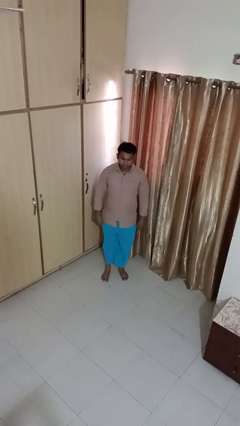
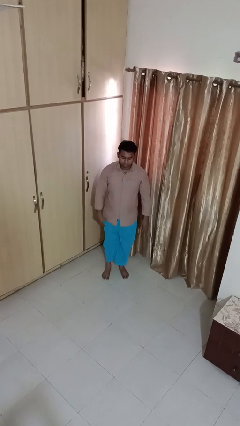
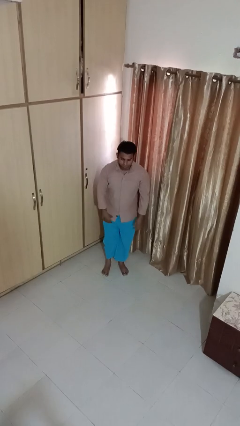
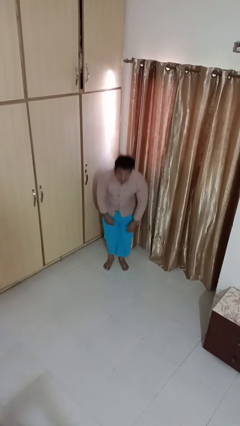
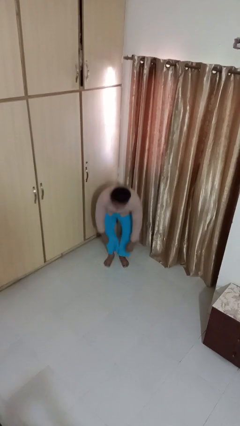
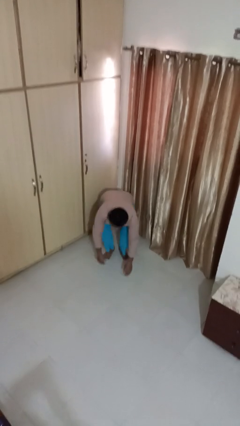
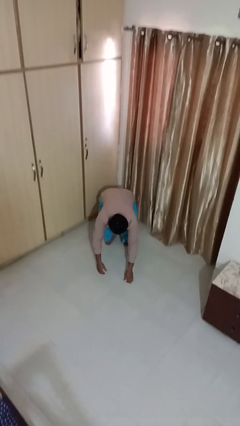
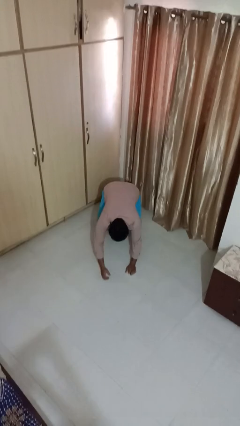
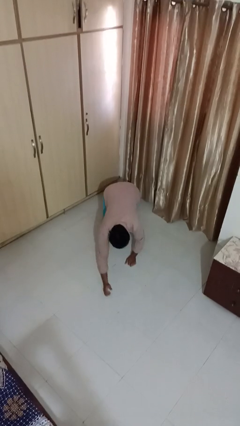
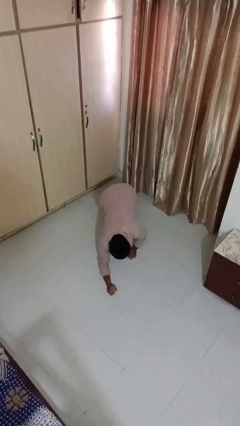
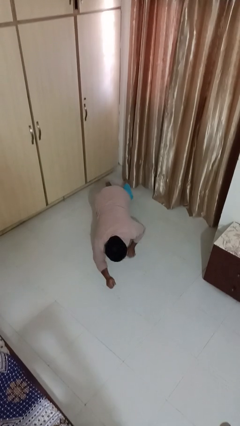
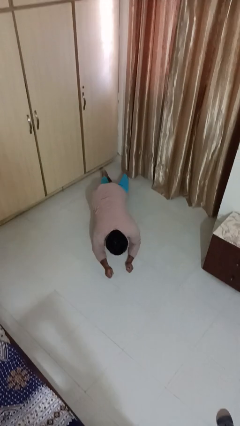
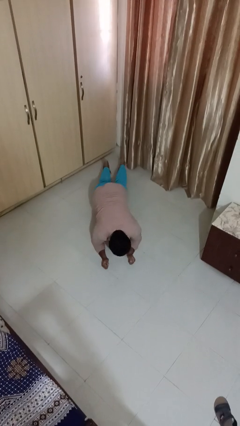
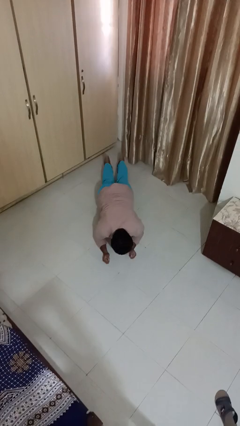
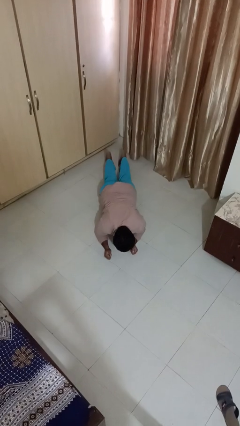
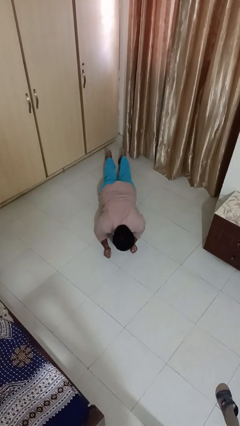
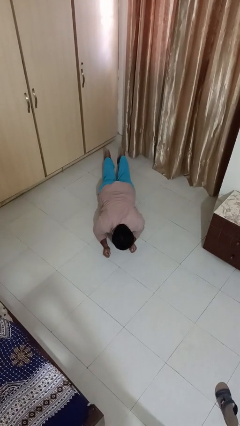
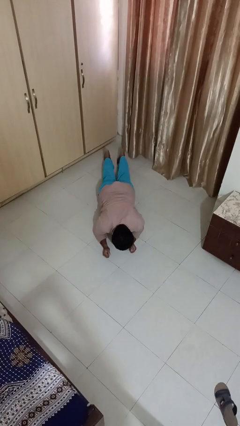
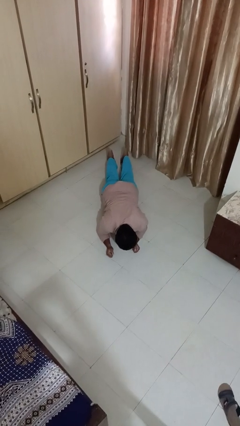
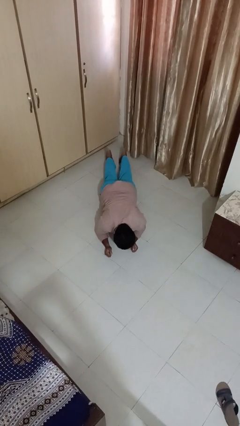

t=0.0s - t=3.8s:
person exercises with plank

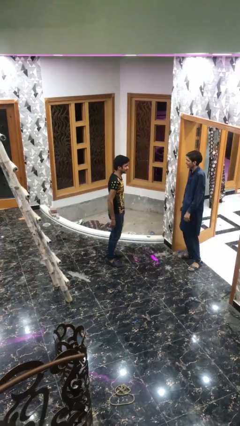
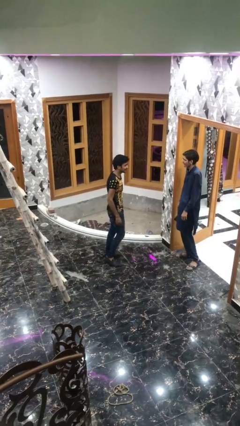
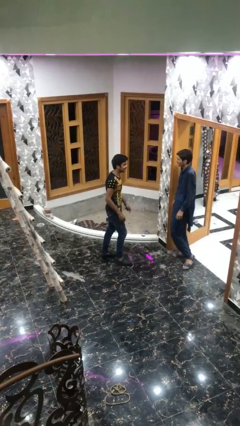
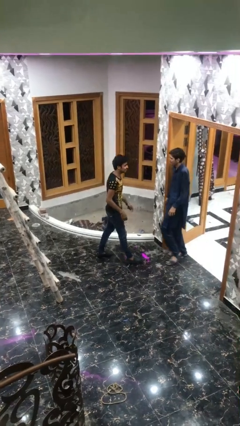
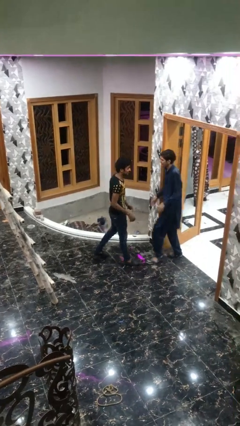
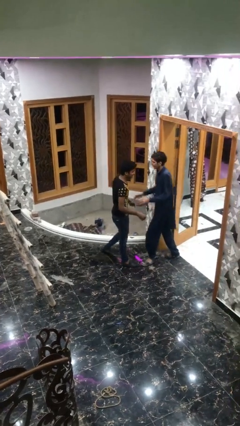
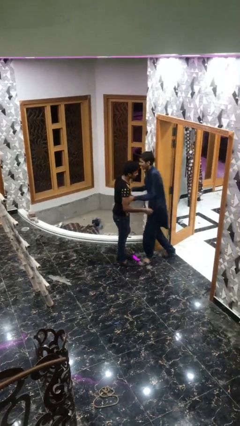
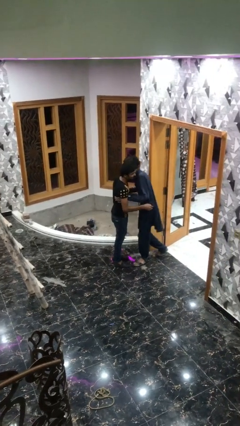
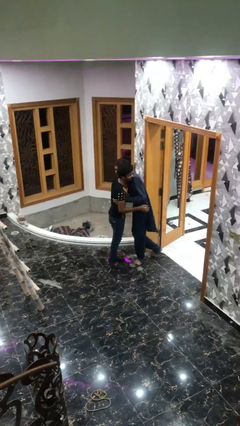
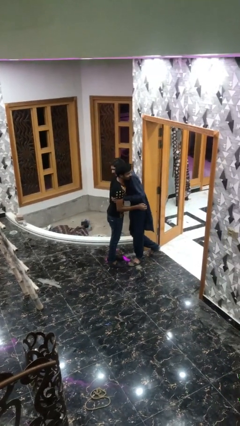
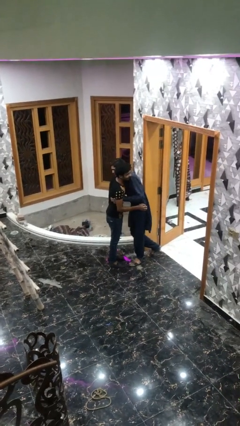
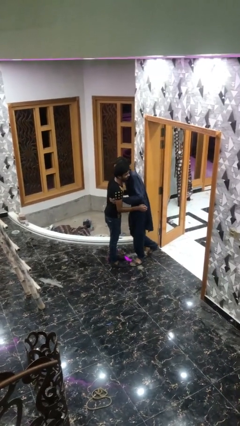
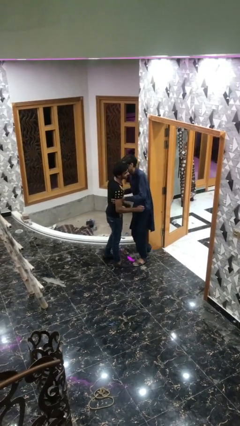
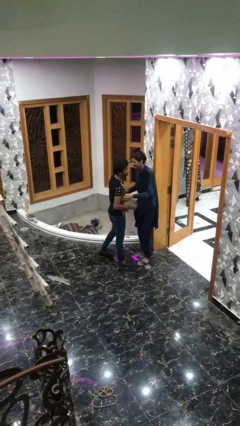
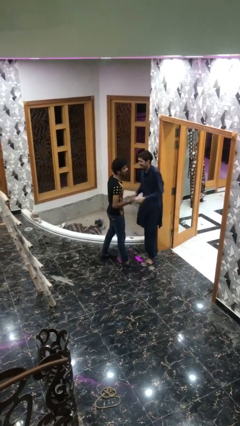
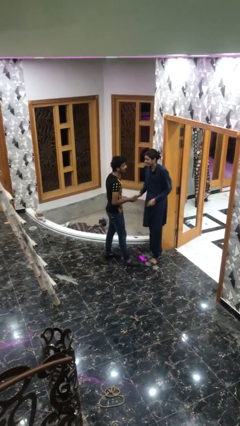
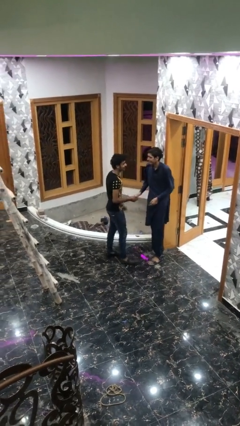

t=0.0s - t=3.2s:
person embraces person

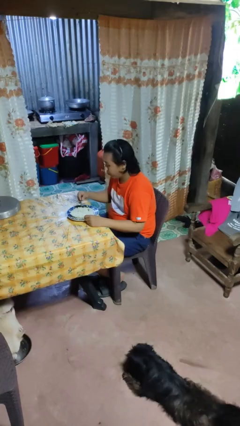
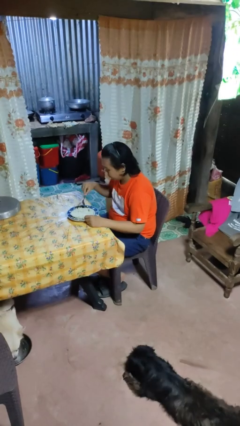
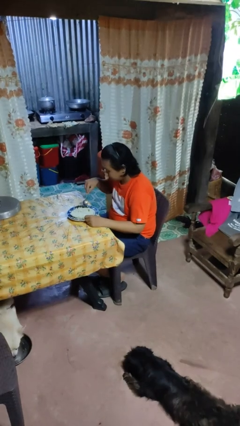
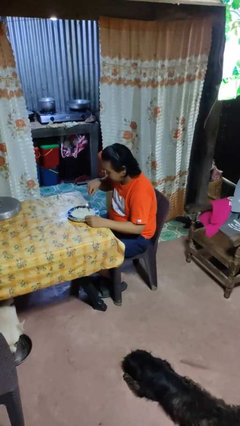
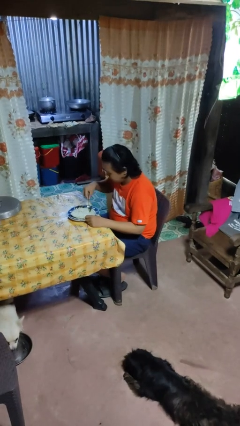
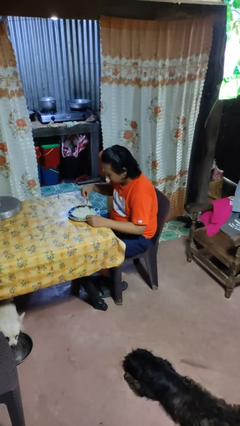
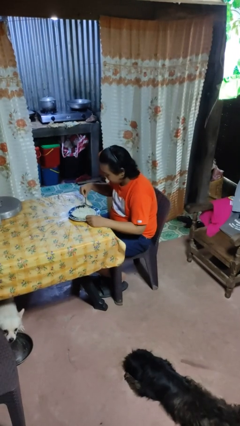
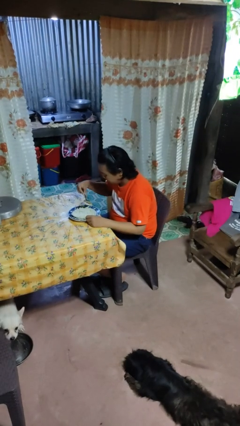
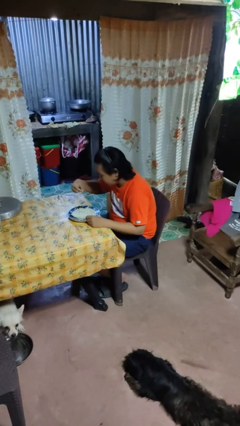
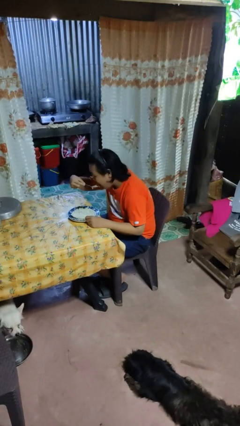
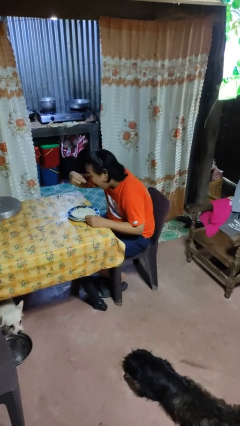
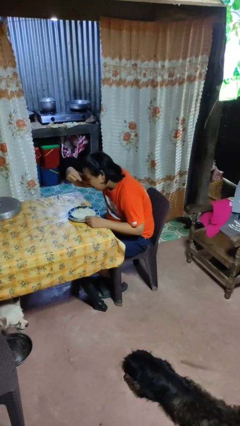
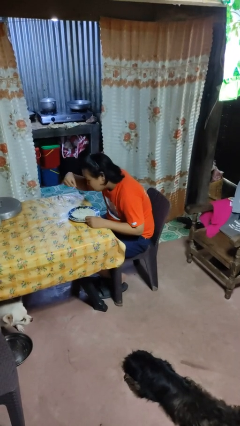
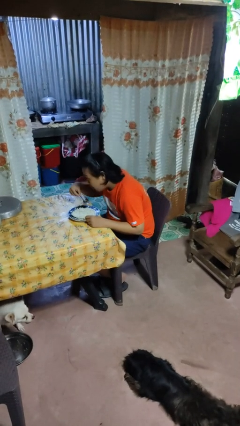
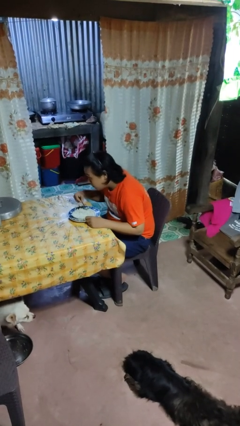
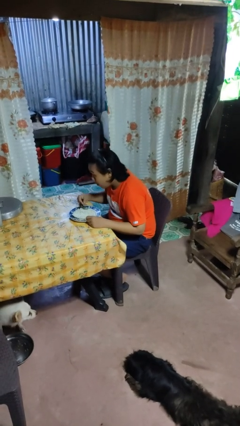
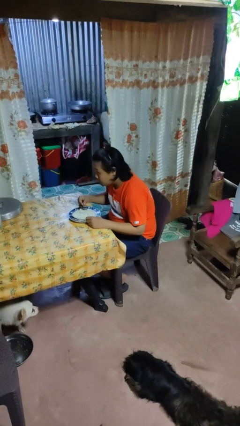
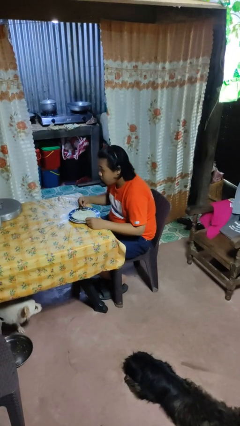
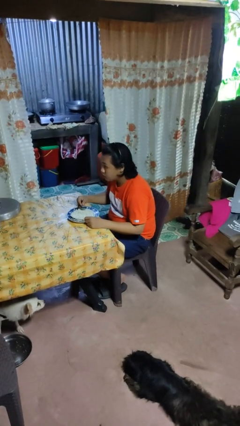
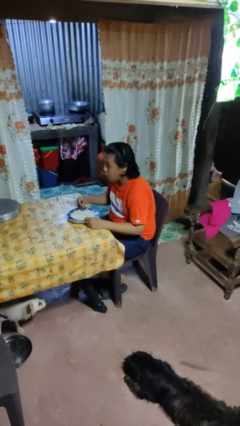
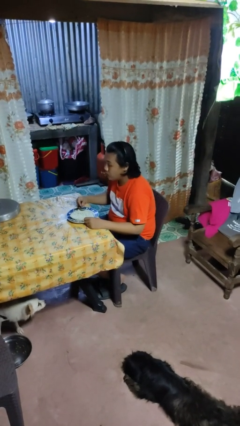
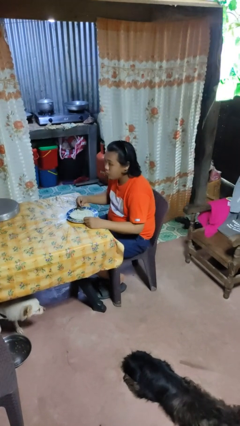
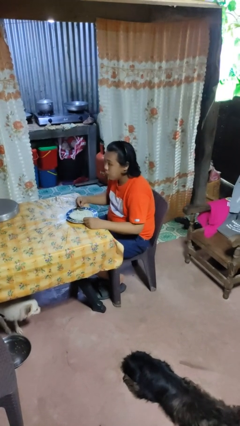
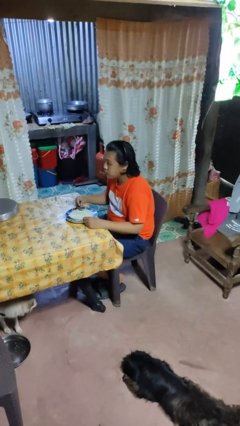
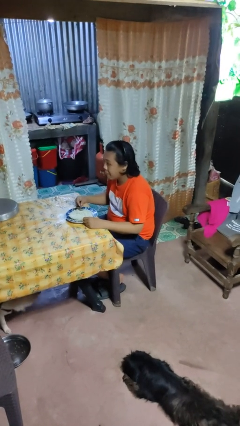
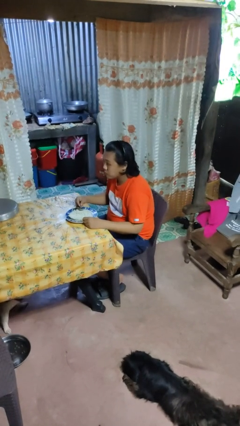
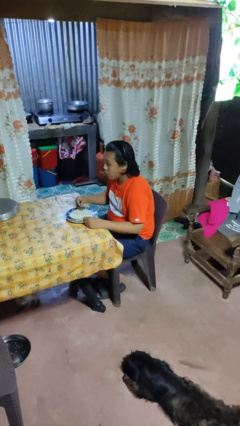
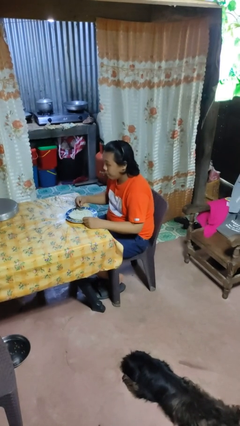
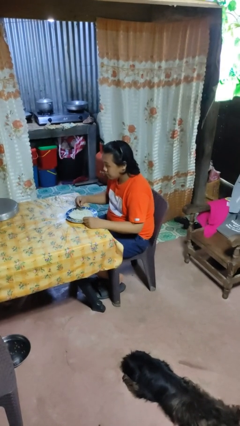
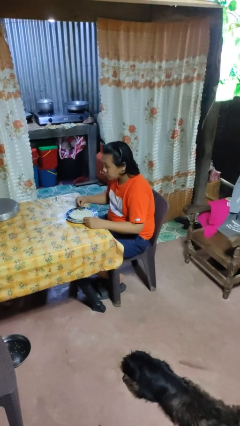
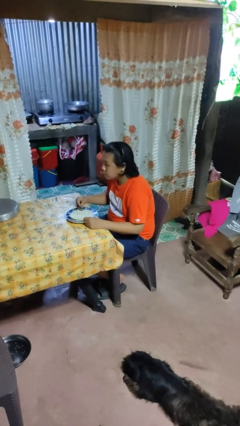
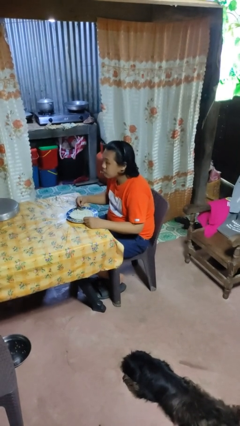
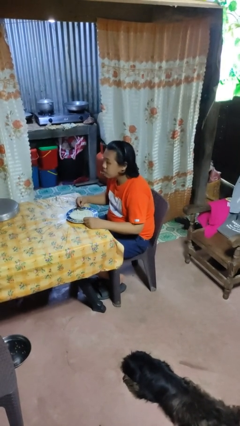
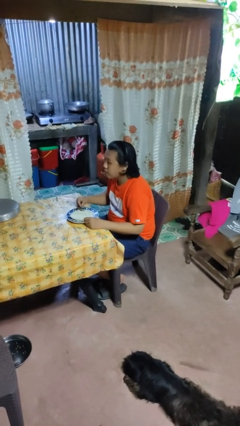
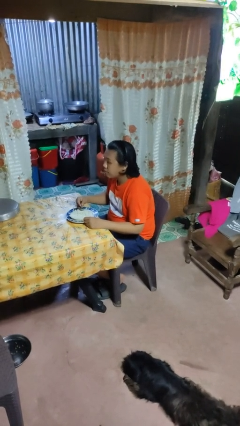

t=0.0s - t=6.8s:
person eats with utensil

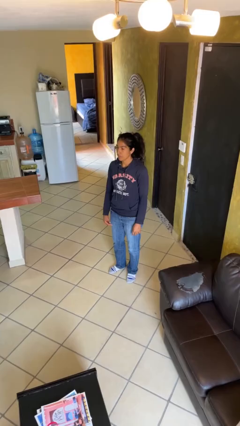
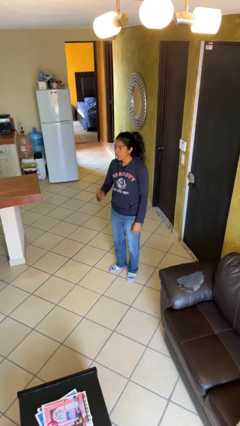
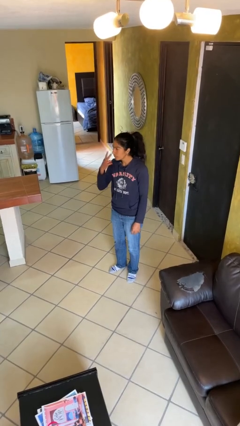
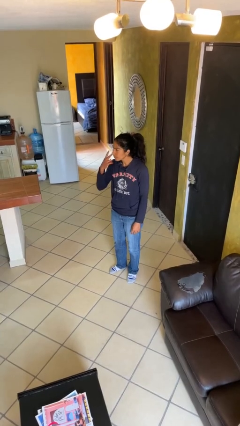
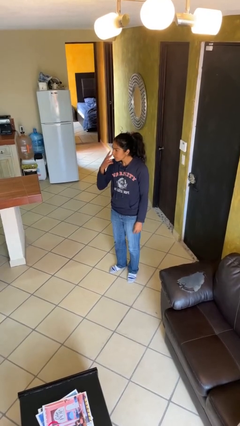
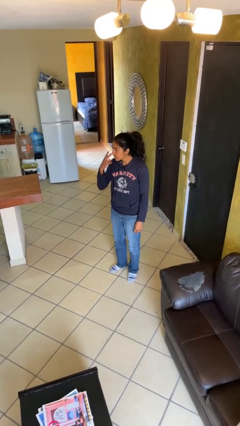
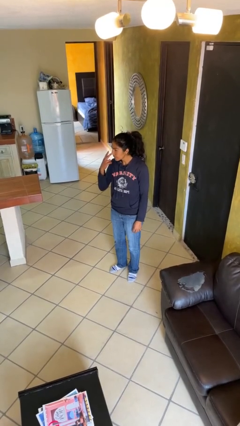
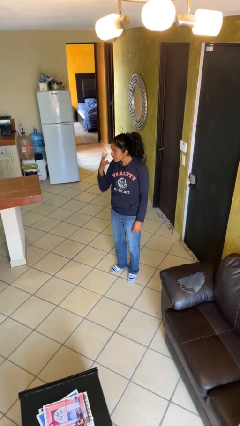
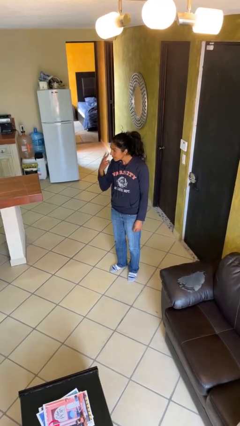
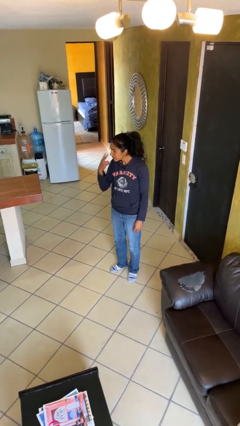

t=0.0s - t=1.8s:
person gestures watch closely

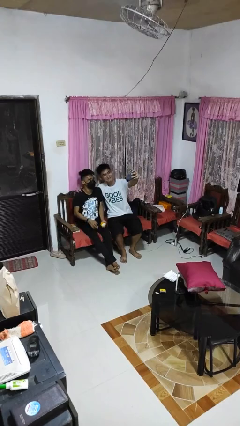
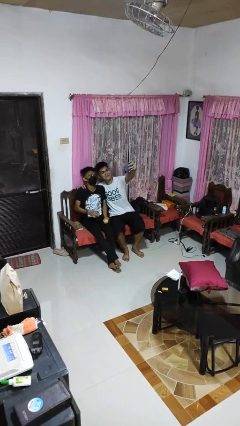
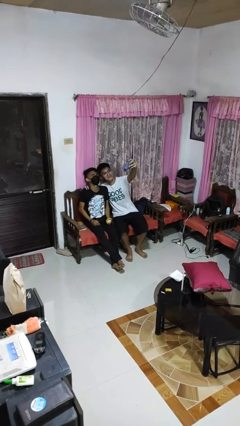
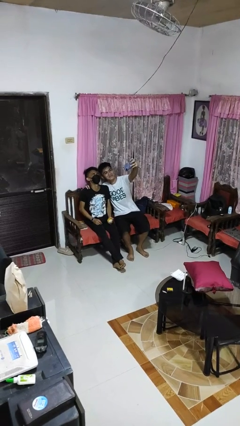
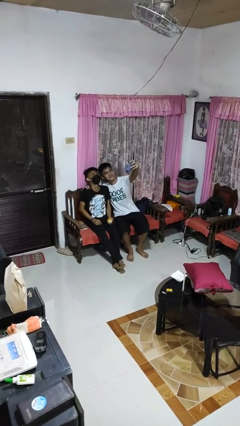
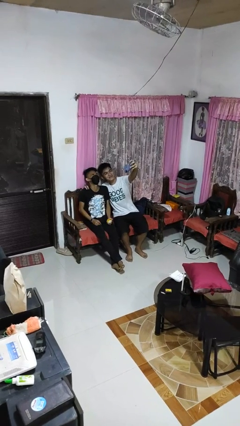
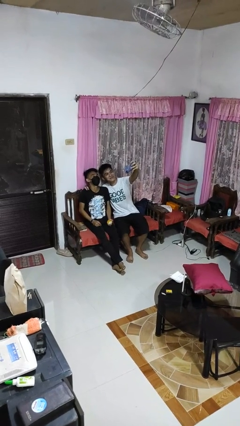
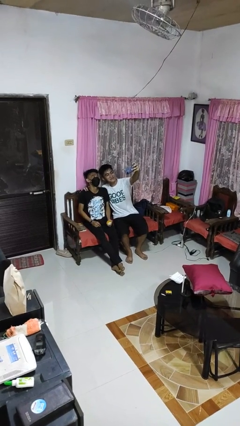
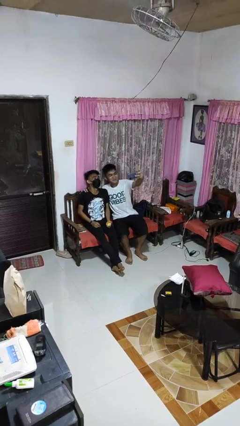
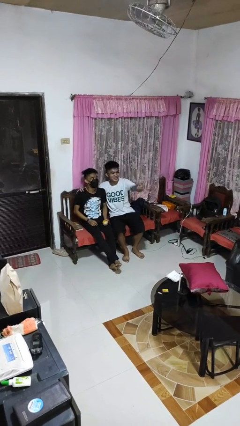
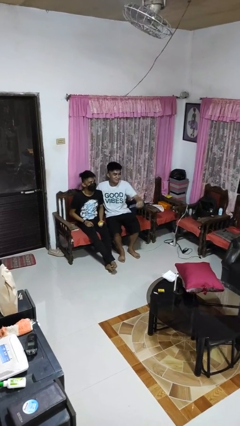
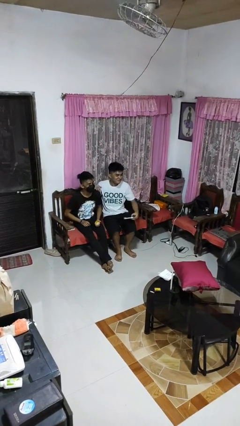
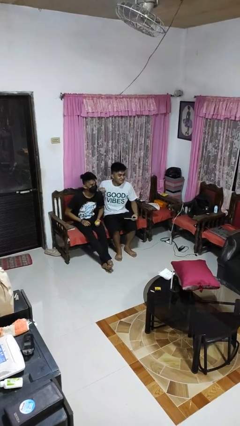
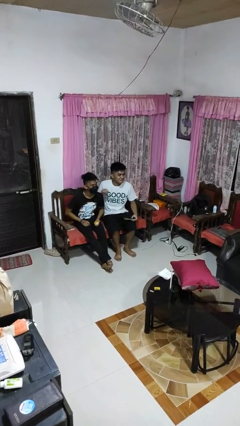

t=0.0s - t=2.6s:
person takes selfie with person
